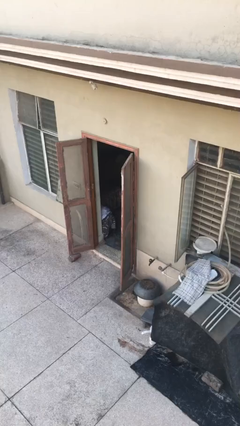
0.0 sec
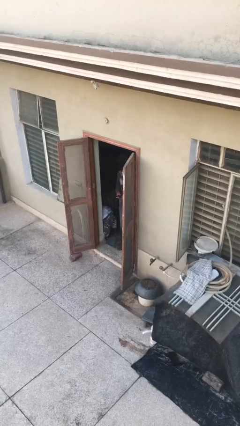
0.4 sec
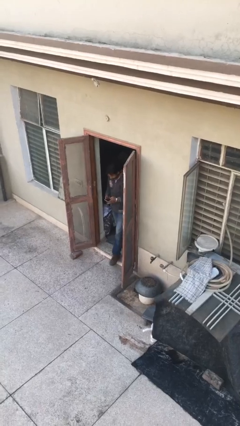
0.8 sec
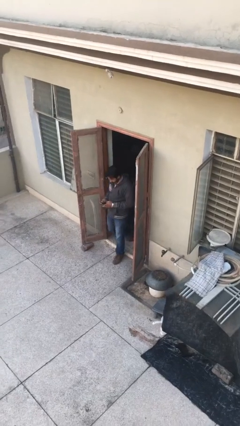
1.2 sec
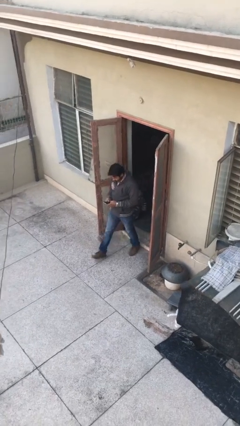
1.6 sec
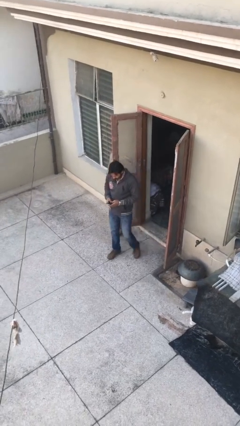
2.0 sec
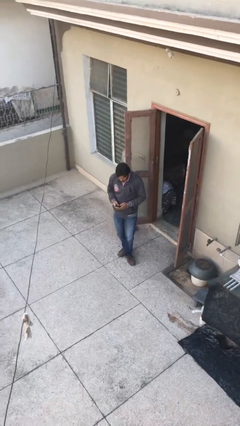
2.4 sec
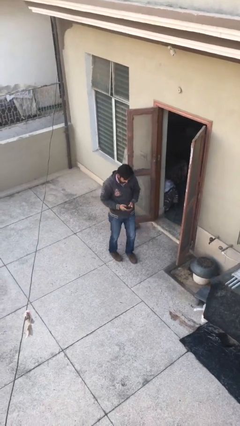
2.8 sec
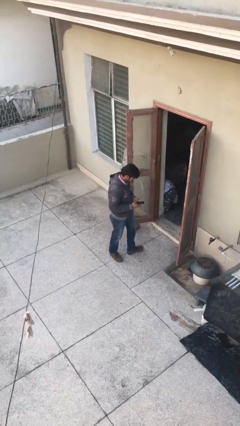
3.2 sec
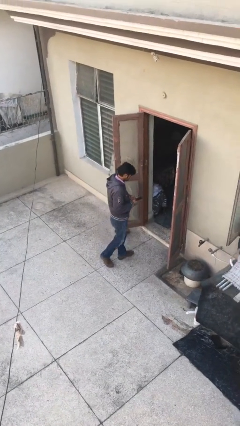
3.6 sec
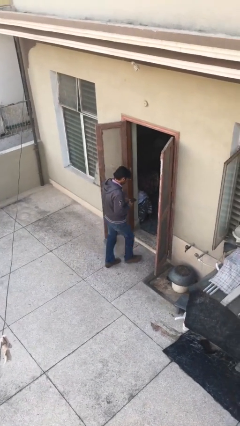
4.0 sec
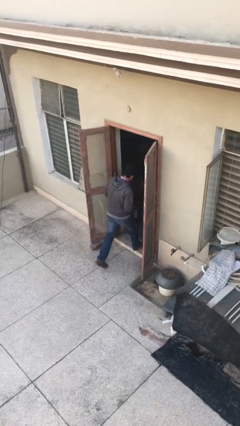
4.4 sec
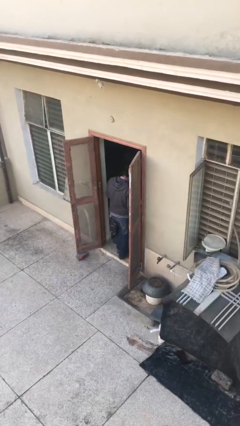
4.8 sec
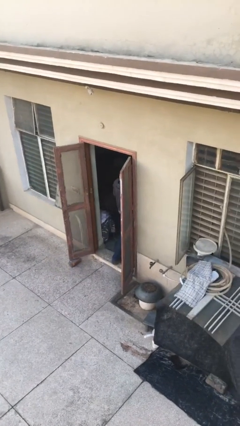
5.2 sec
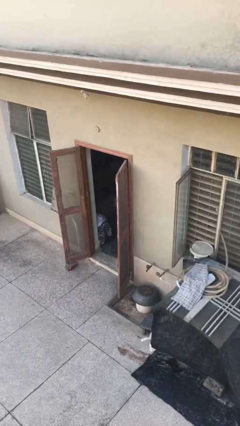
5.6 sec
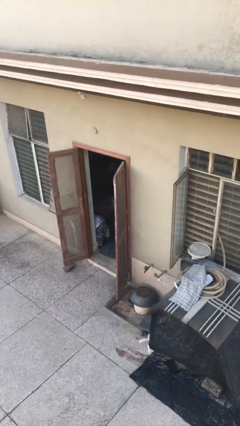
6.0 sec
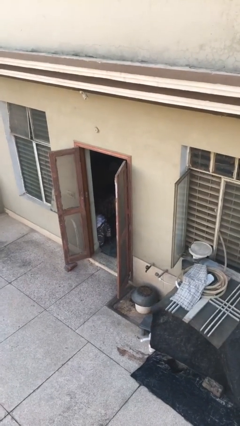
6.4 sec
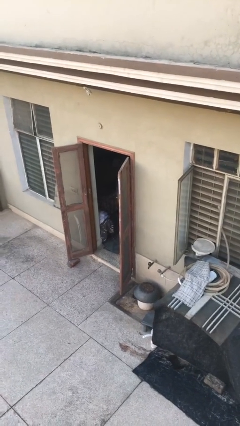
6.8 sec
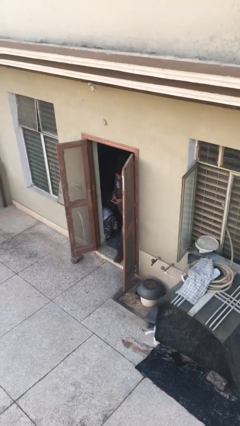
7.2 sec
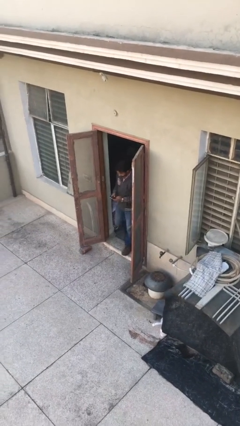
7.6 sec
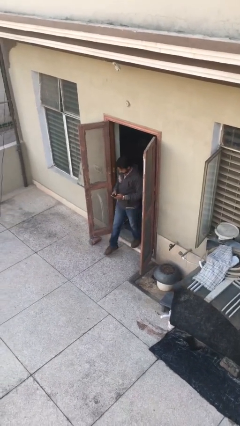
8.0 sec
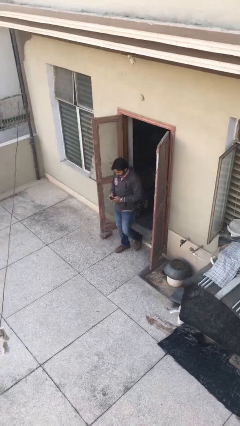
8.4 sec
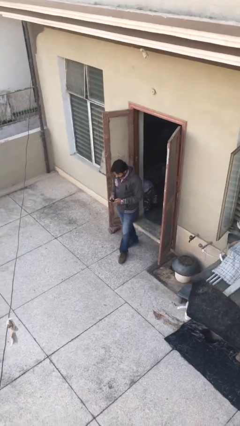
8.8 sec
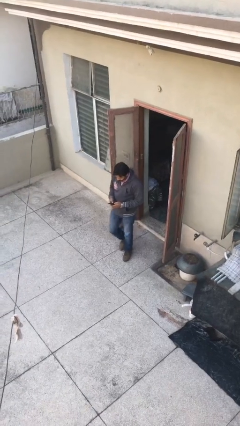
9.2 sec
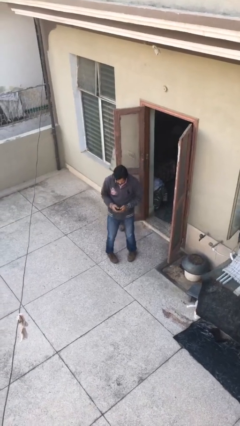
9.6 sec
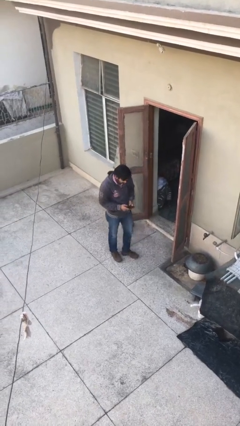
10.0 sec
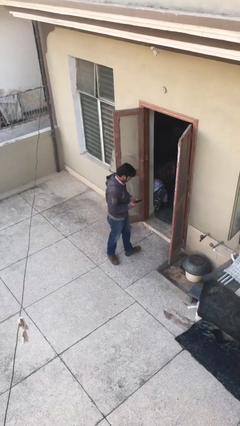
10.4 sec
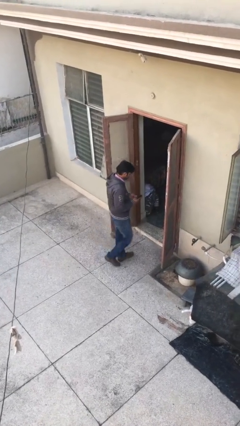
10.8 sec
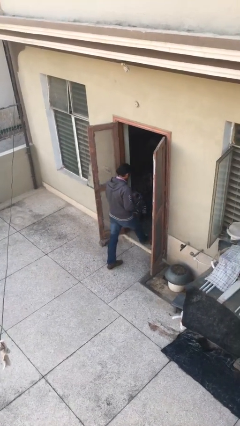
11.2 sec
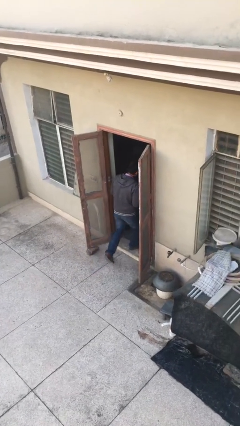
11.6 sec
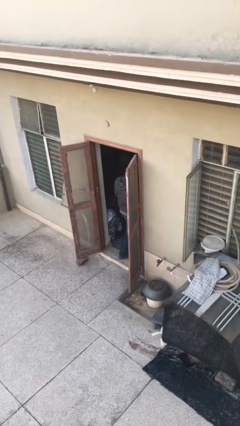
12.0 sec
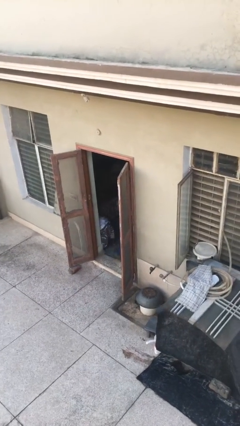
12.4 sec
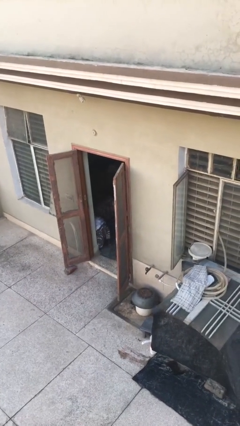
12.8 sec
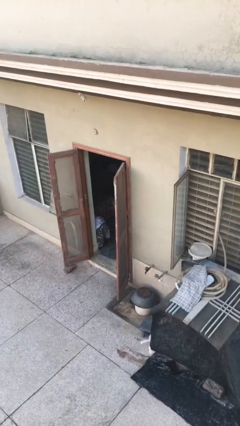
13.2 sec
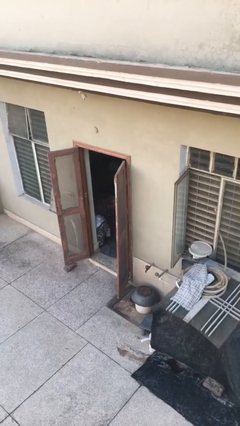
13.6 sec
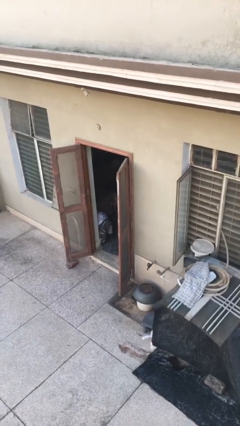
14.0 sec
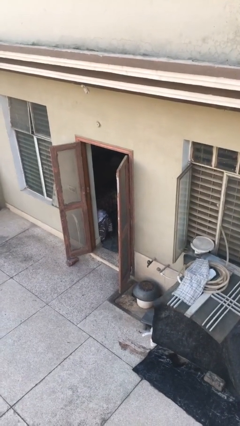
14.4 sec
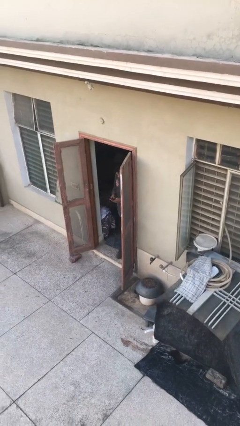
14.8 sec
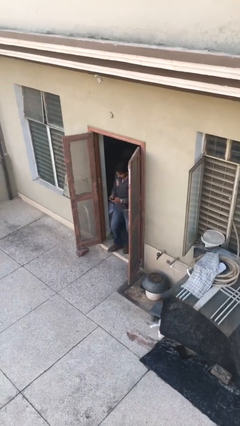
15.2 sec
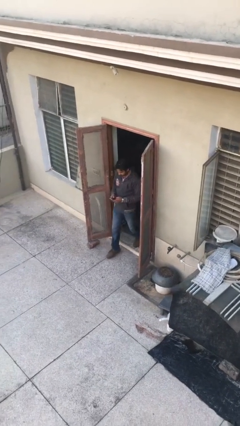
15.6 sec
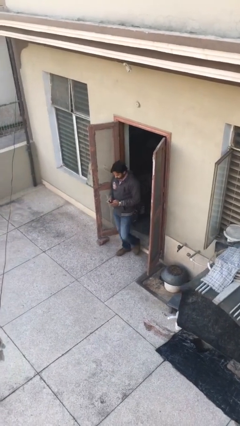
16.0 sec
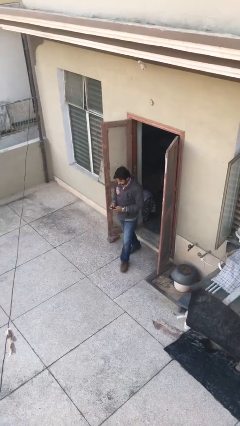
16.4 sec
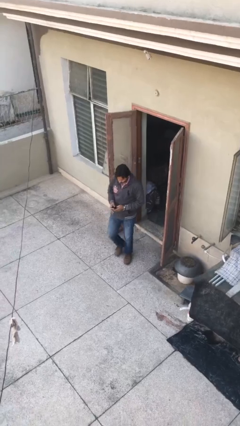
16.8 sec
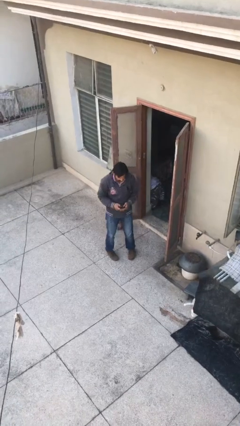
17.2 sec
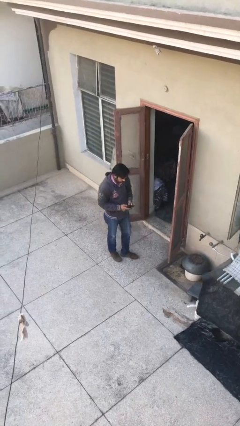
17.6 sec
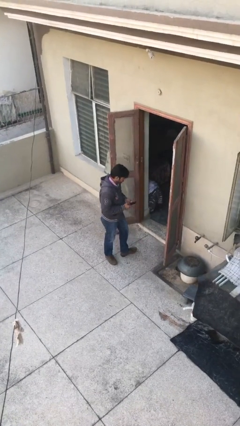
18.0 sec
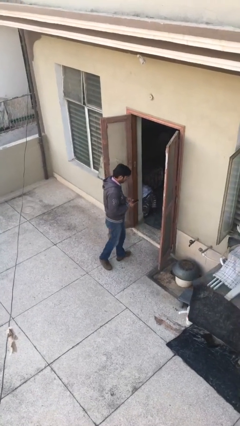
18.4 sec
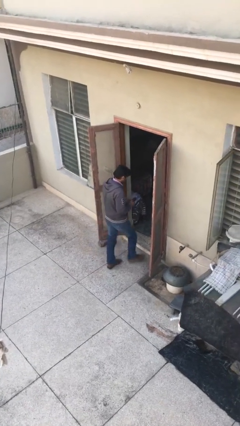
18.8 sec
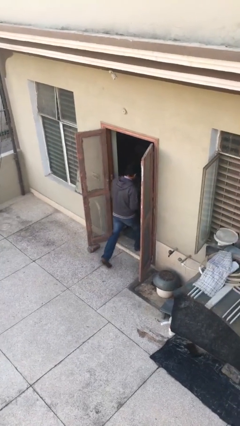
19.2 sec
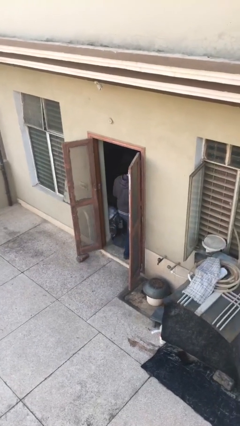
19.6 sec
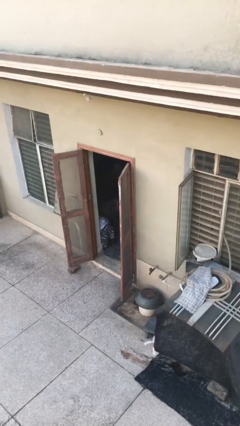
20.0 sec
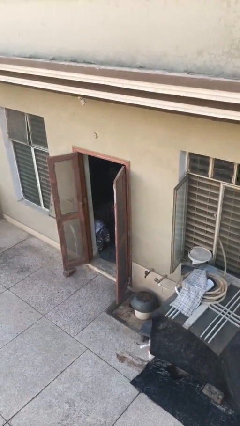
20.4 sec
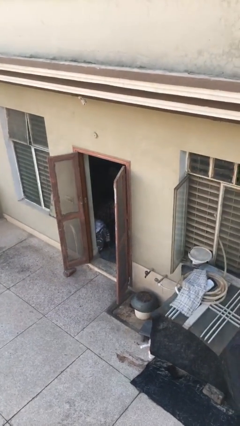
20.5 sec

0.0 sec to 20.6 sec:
person texts on phone

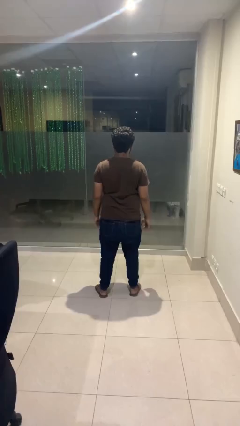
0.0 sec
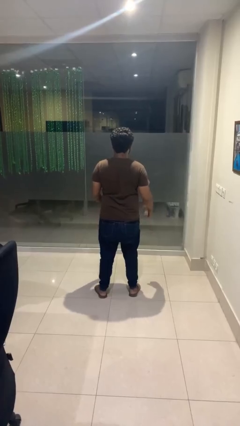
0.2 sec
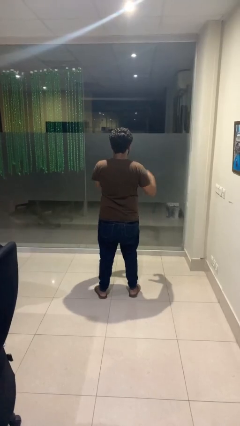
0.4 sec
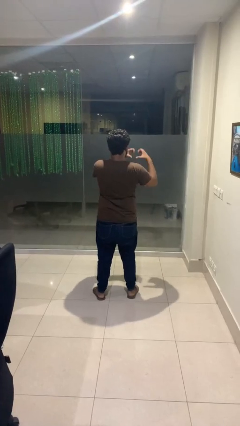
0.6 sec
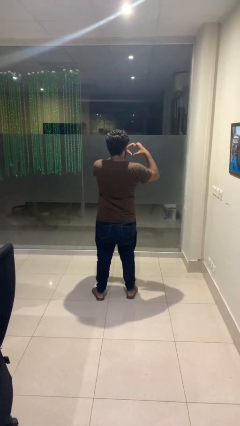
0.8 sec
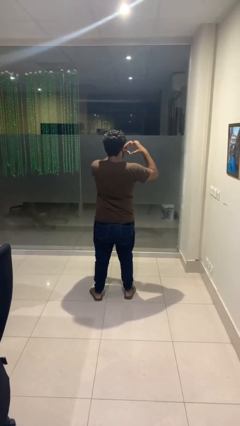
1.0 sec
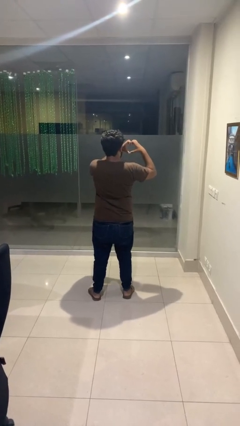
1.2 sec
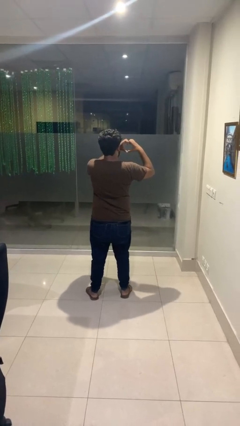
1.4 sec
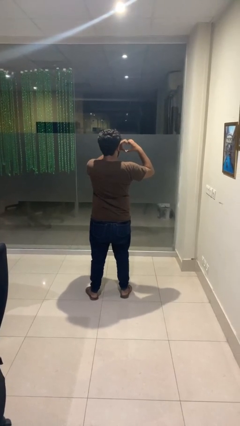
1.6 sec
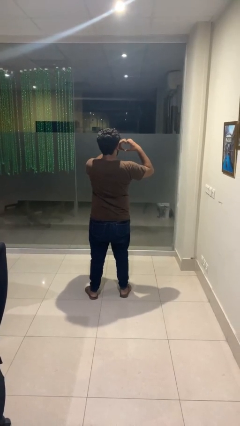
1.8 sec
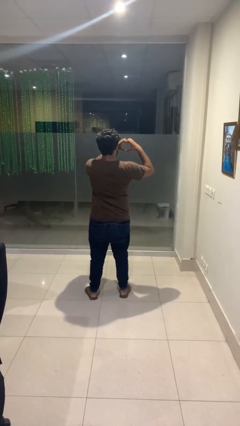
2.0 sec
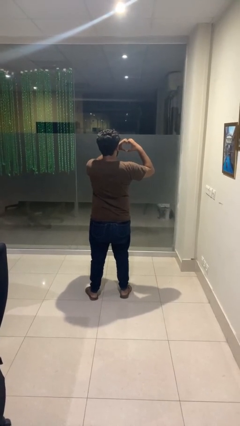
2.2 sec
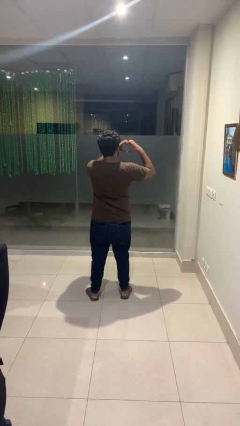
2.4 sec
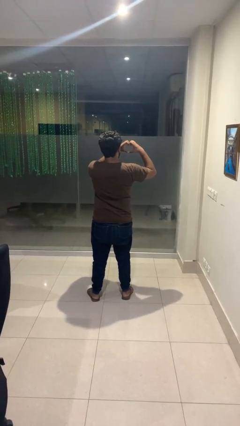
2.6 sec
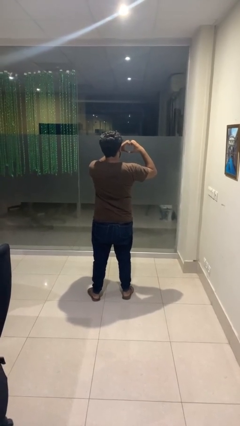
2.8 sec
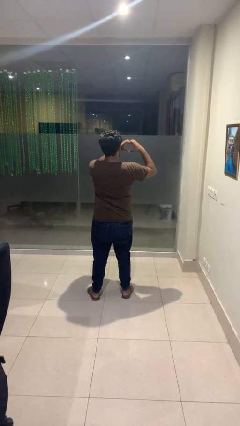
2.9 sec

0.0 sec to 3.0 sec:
person gestures heart

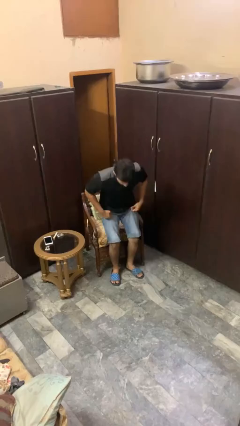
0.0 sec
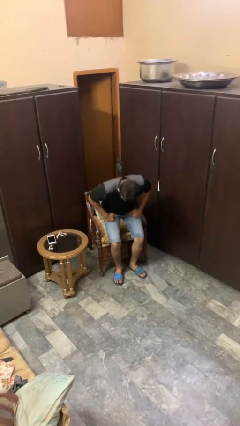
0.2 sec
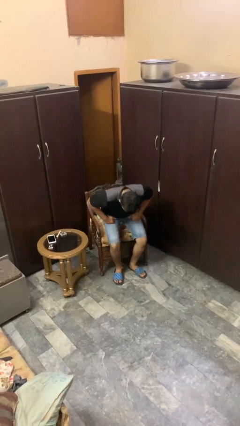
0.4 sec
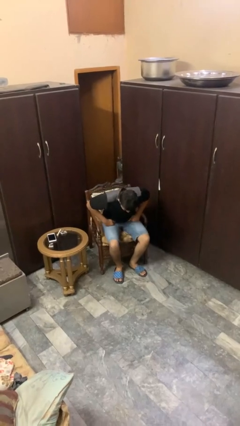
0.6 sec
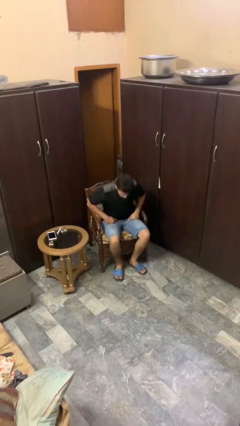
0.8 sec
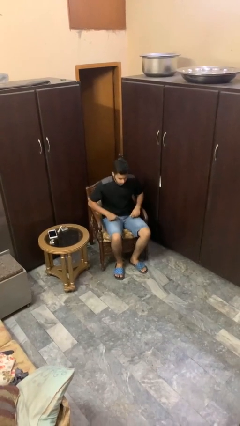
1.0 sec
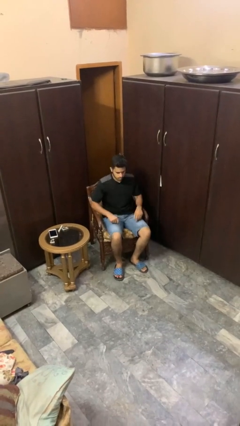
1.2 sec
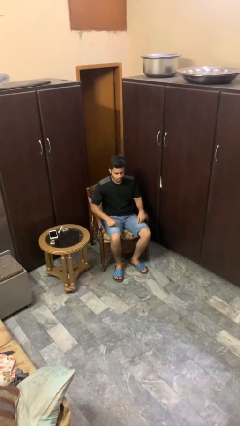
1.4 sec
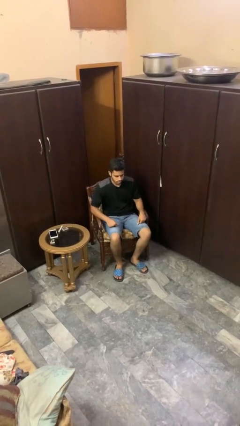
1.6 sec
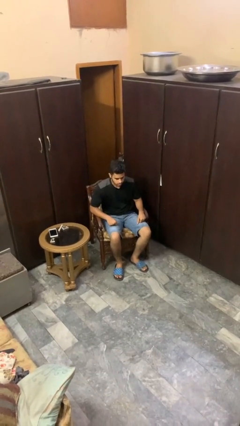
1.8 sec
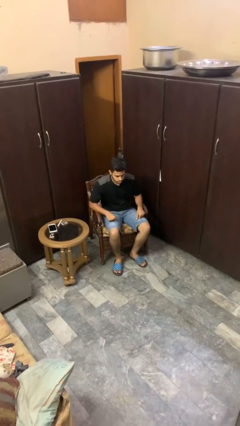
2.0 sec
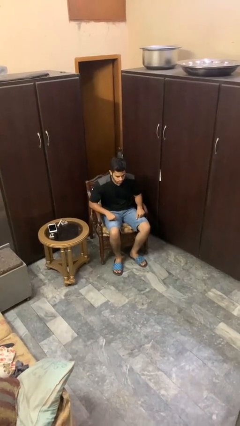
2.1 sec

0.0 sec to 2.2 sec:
person sits down

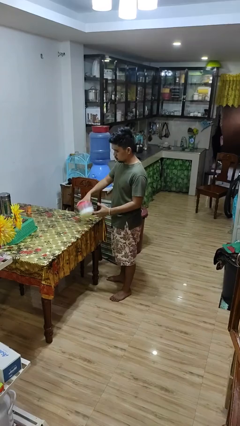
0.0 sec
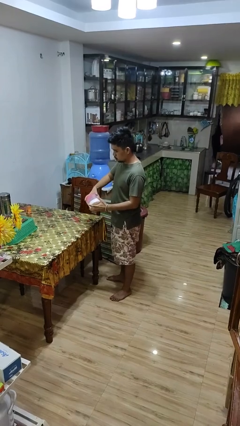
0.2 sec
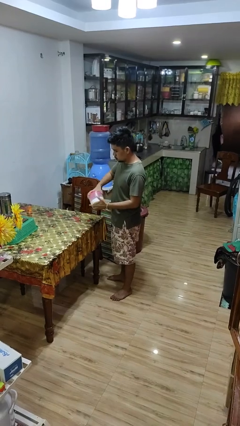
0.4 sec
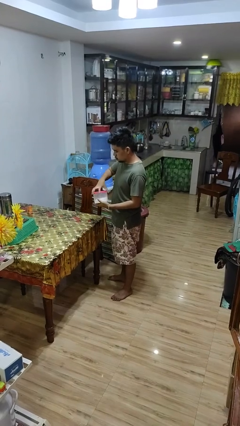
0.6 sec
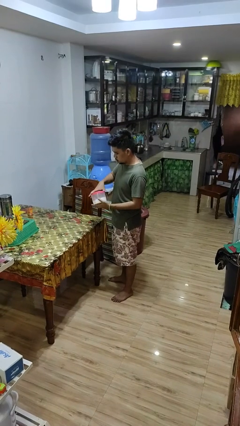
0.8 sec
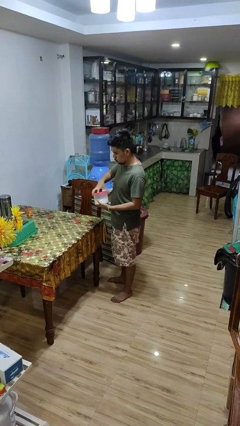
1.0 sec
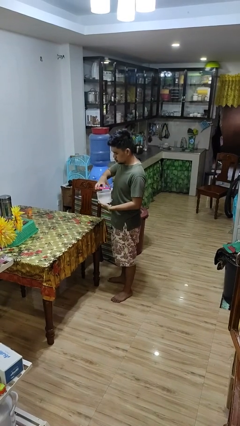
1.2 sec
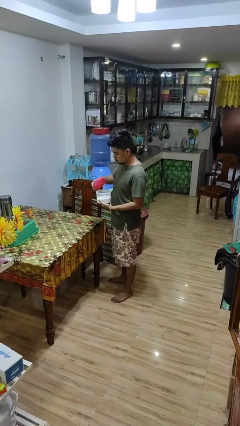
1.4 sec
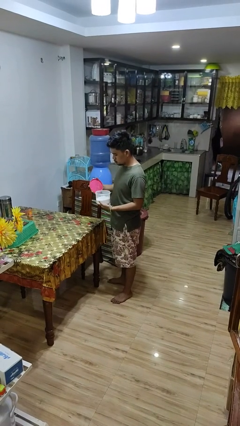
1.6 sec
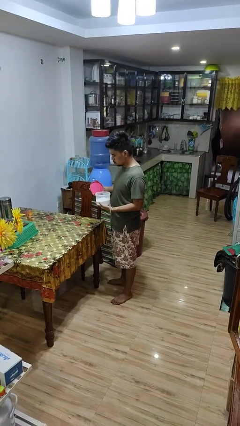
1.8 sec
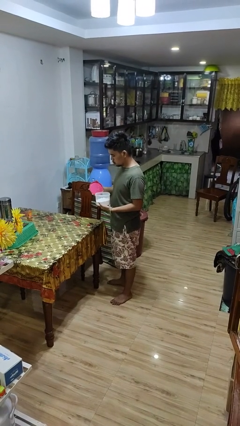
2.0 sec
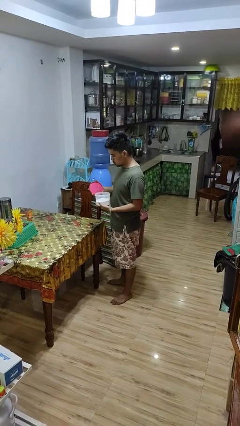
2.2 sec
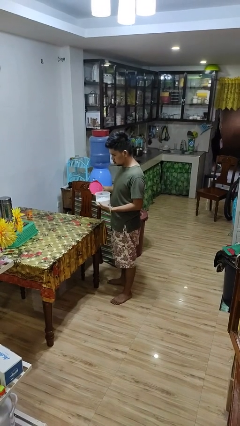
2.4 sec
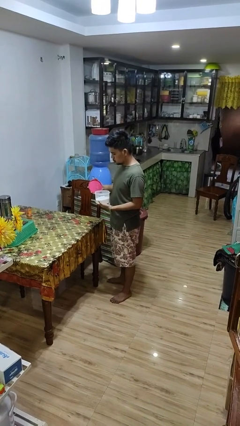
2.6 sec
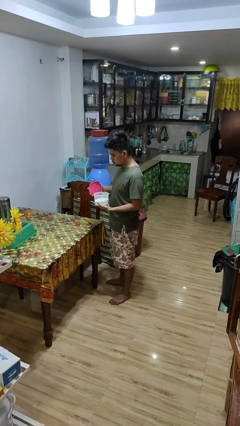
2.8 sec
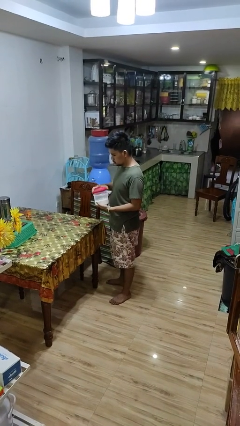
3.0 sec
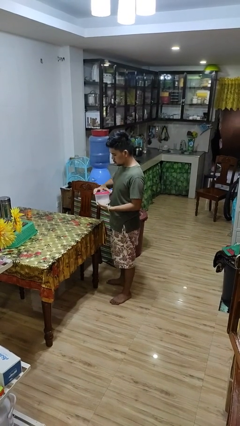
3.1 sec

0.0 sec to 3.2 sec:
person opens jar
